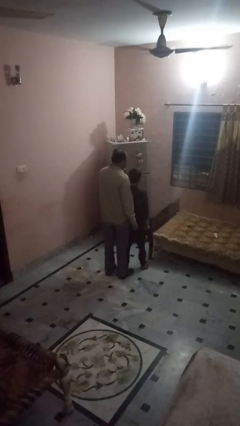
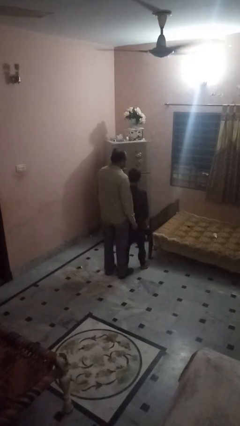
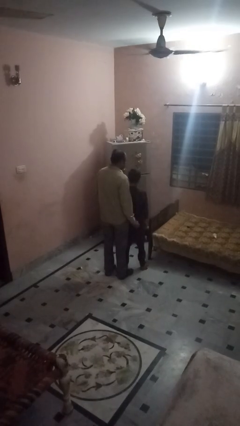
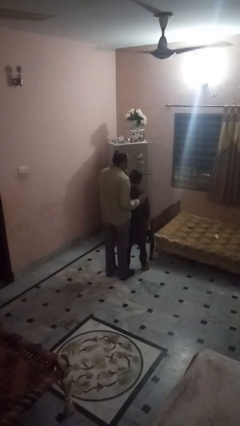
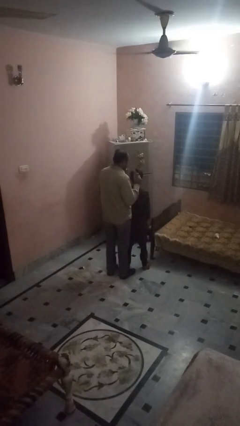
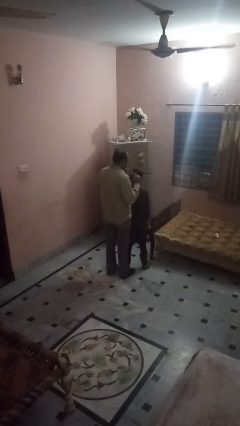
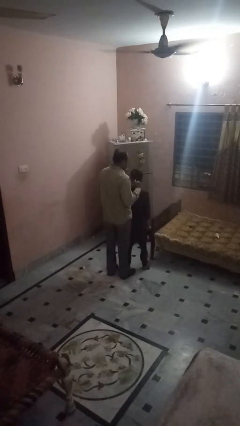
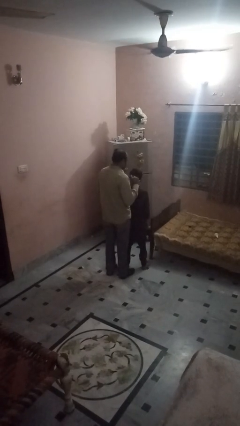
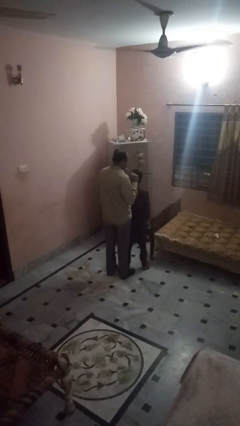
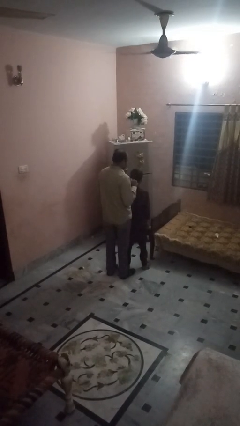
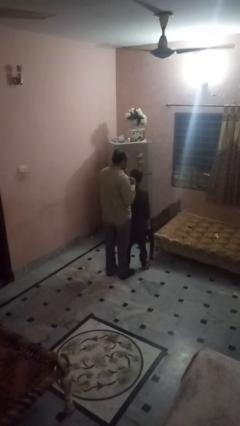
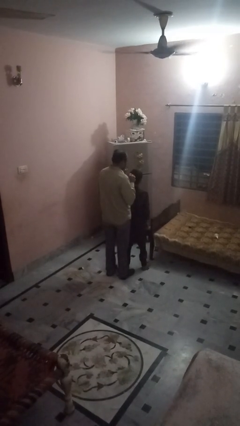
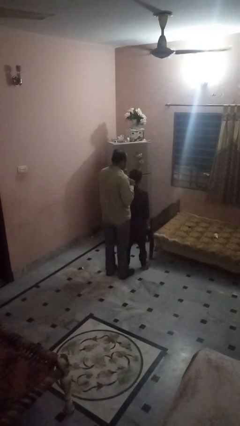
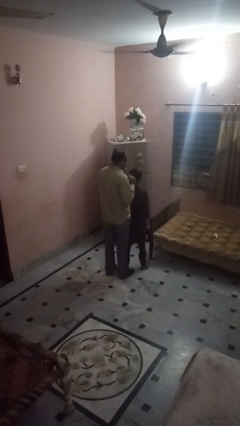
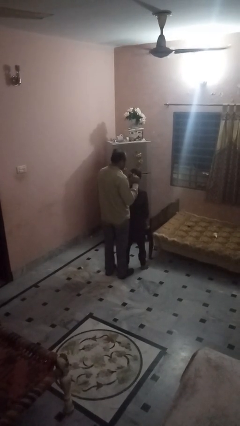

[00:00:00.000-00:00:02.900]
person brushes hair of person

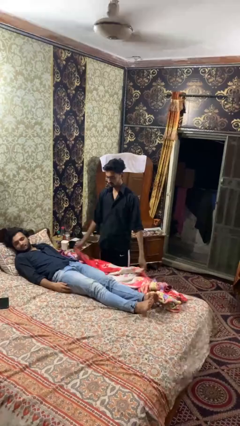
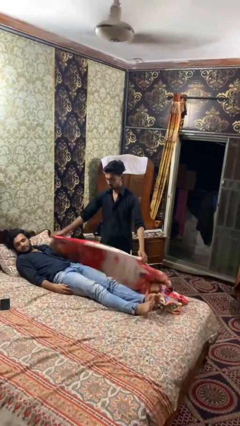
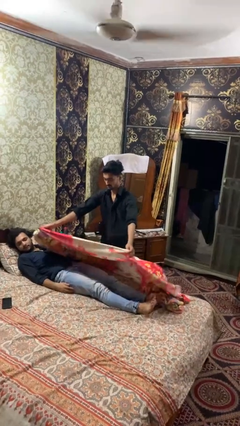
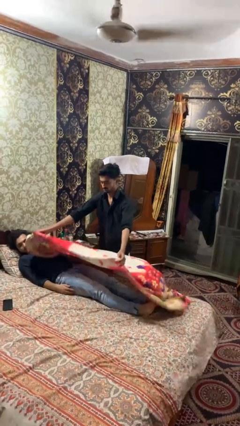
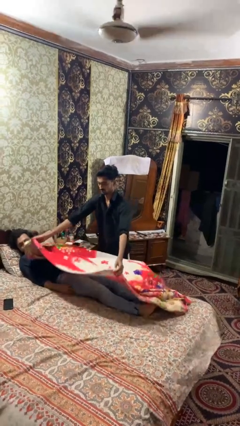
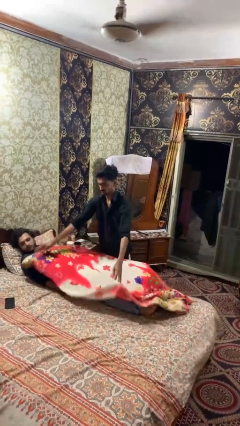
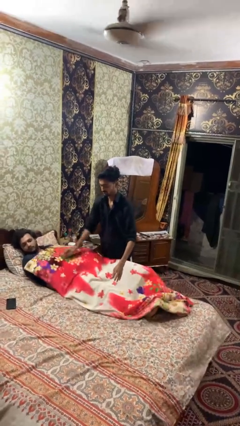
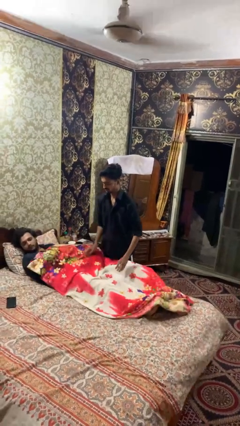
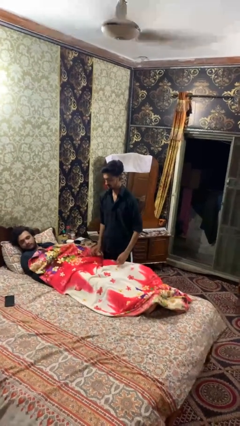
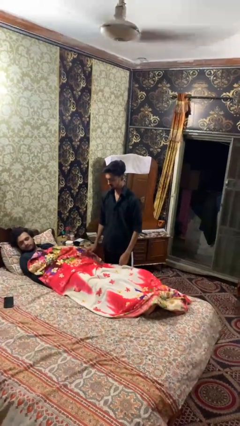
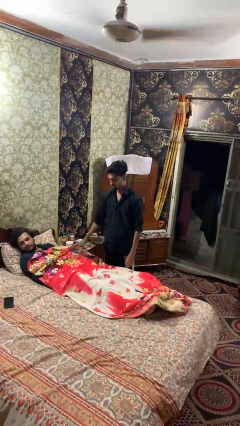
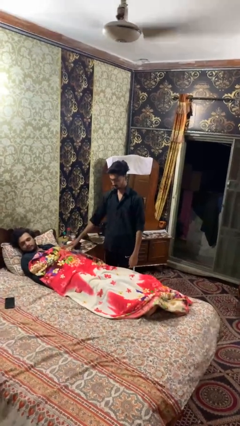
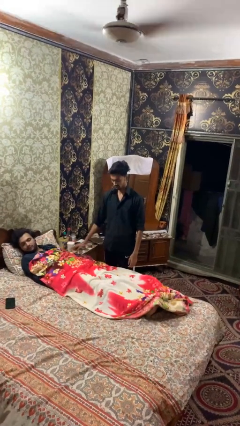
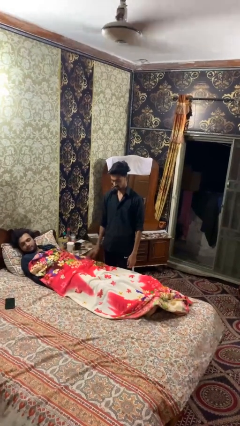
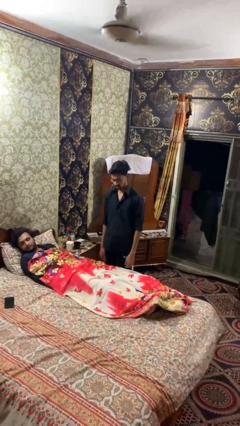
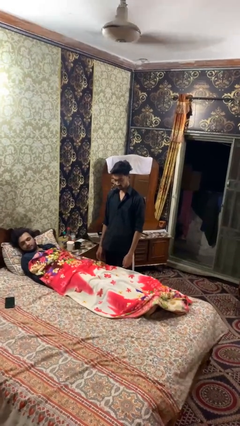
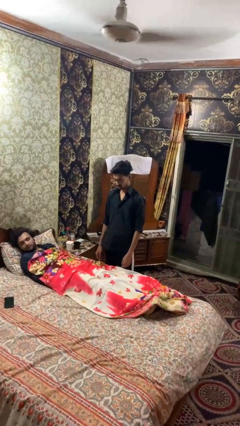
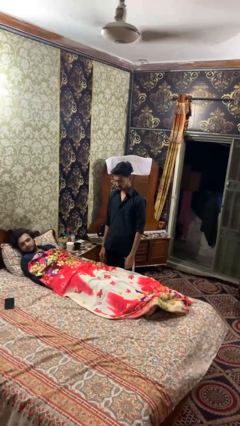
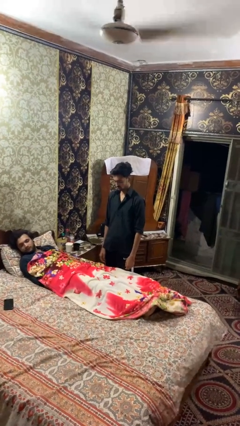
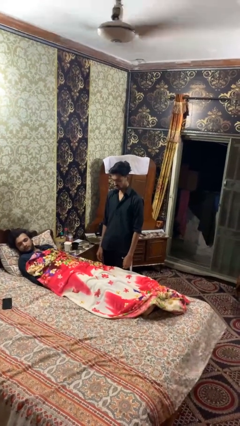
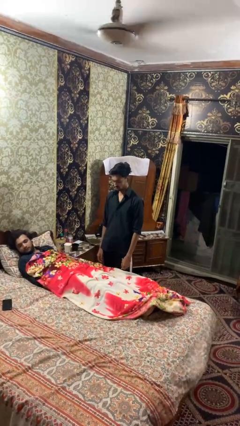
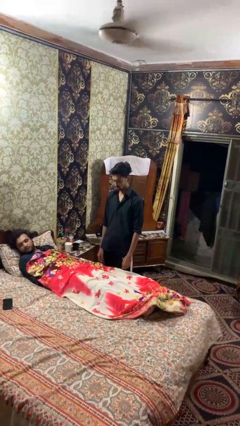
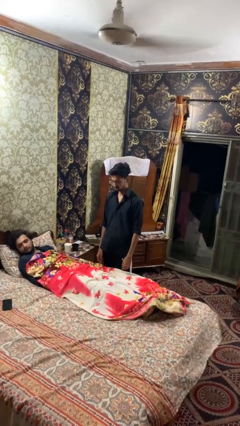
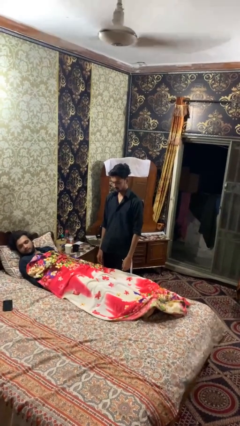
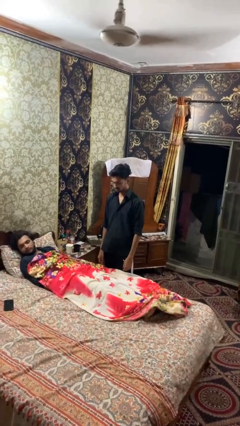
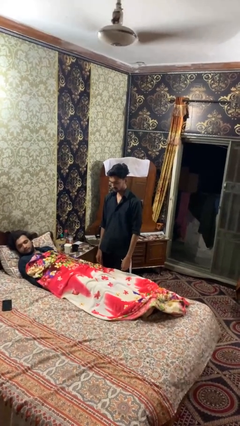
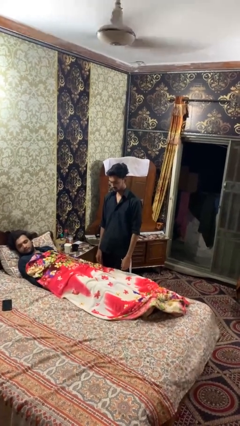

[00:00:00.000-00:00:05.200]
person covers friend with blanket

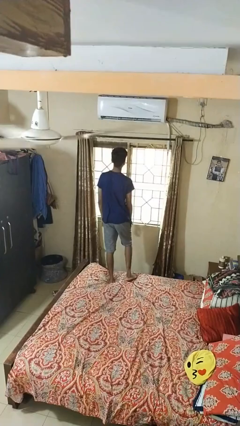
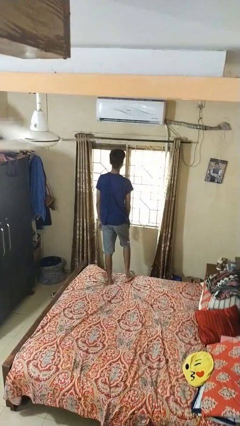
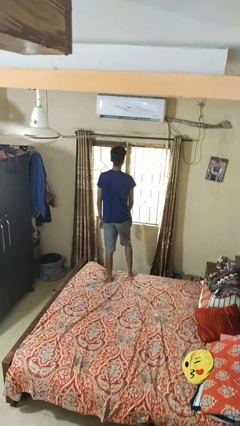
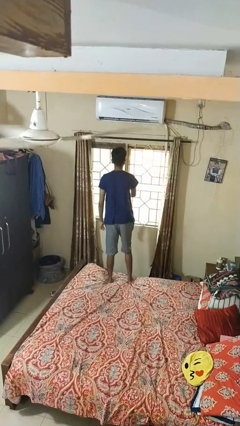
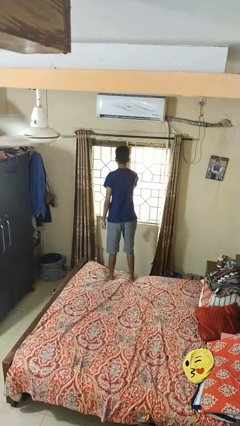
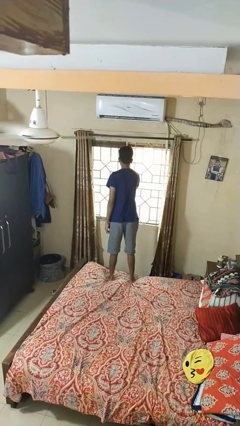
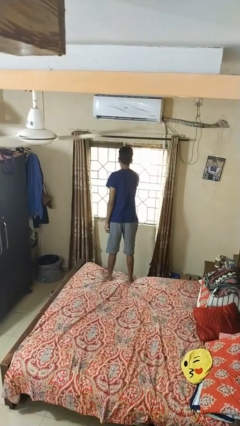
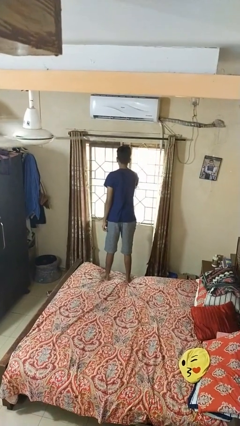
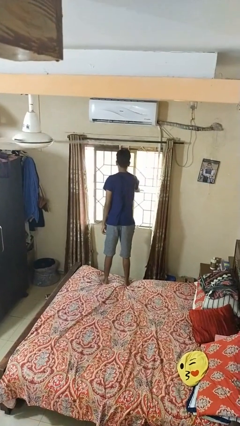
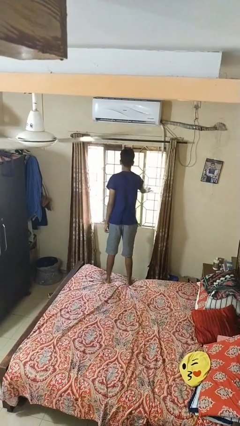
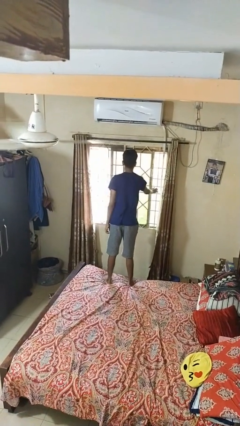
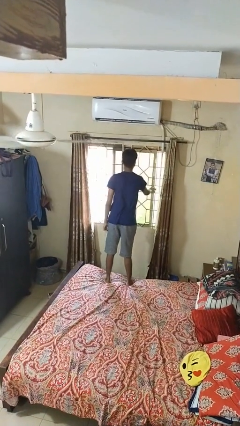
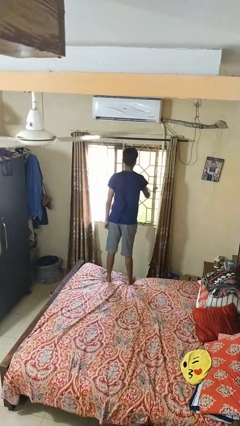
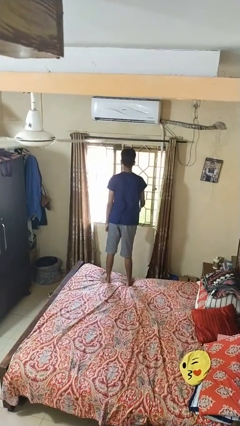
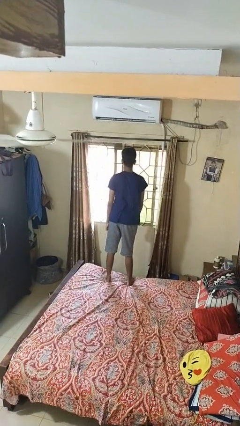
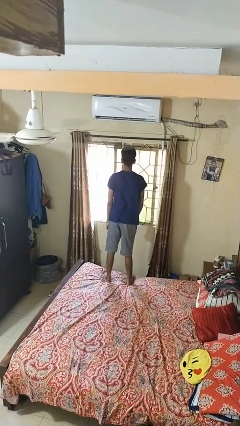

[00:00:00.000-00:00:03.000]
person opens home window

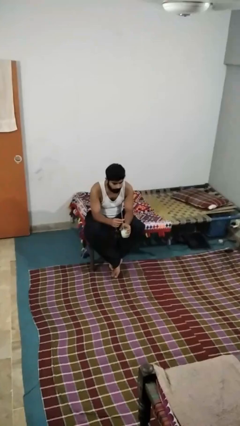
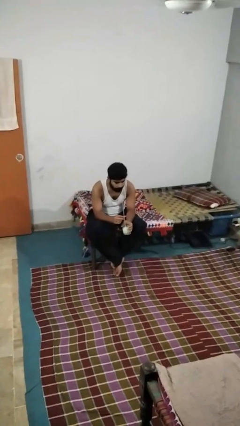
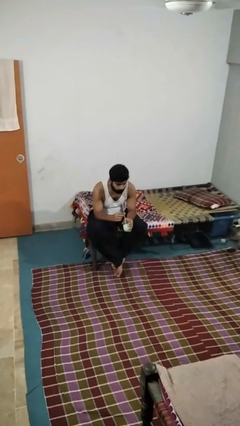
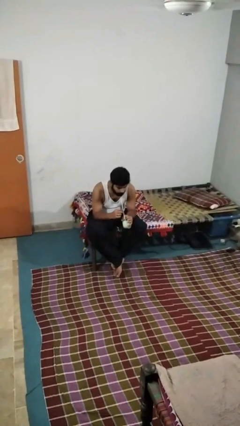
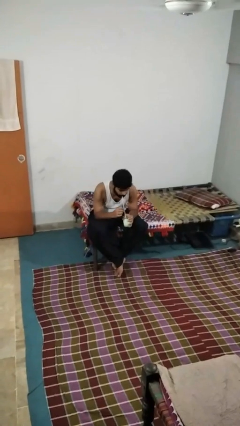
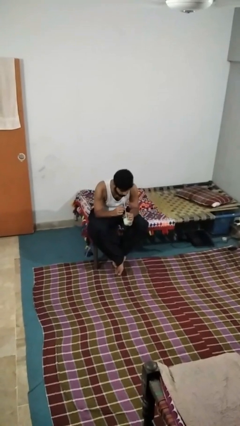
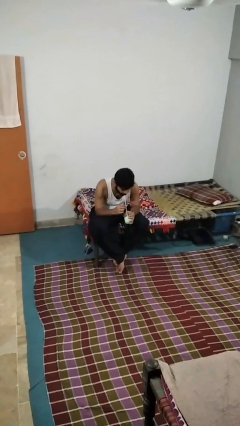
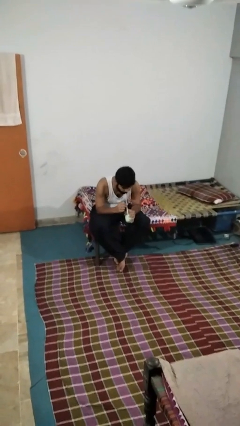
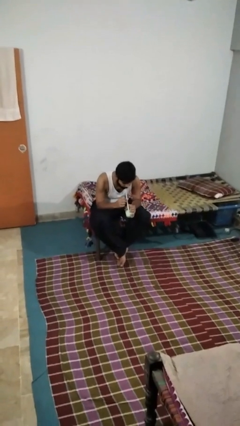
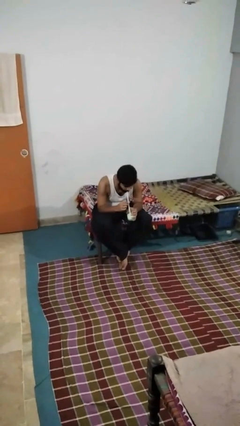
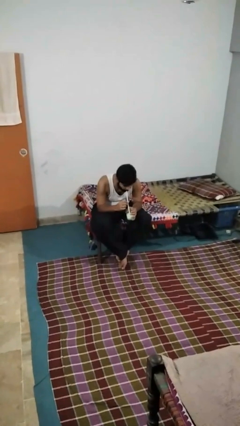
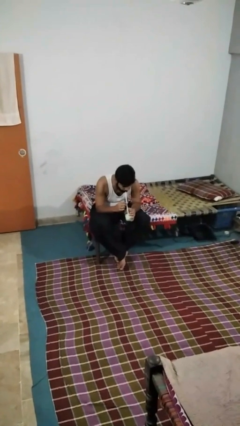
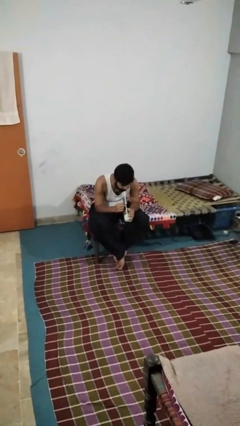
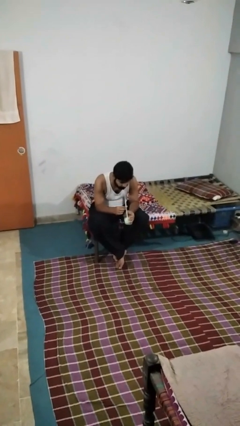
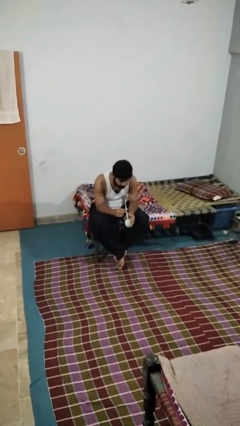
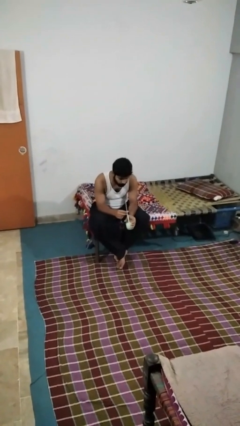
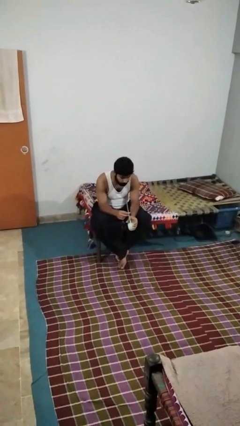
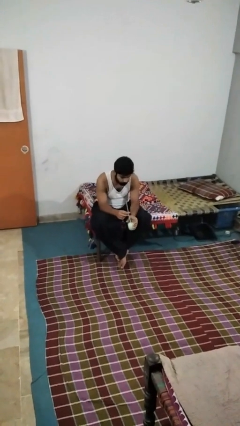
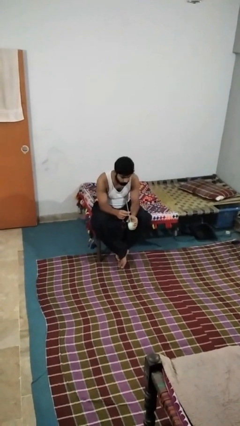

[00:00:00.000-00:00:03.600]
person drinks from straw

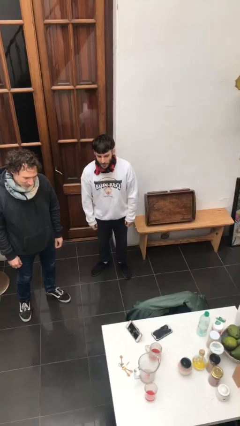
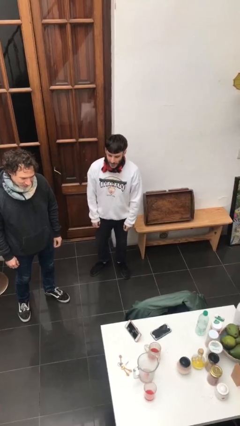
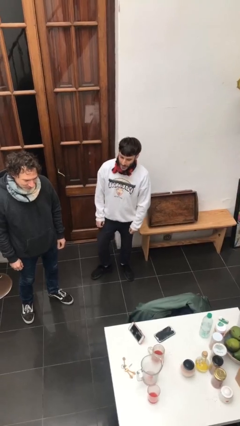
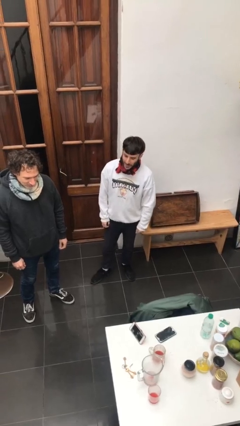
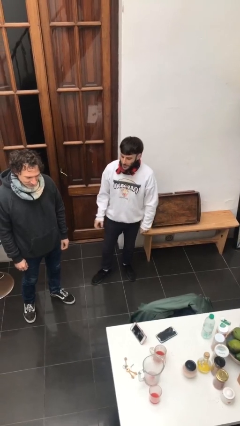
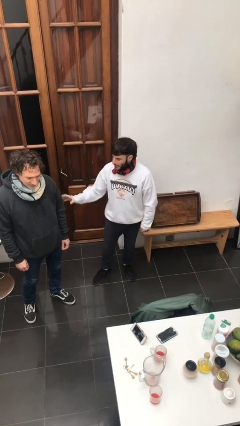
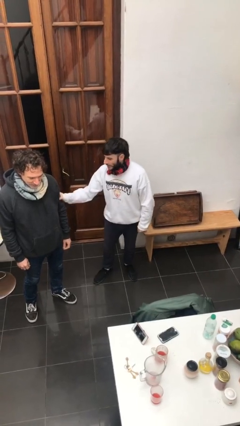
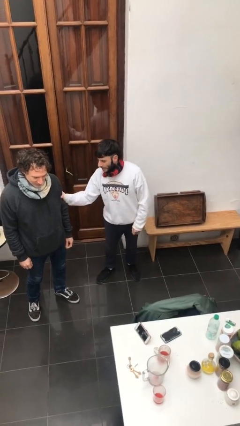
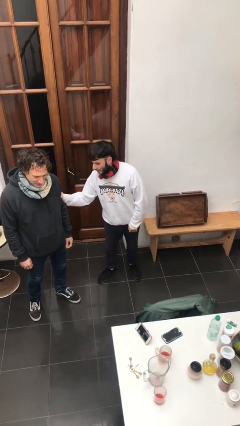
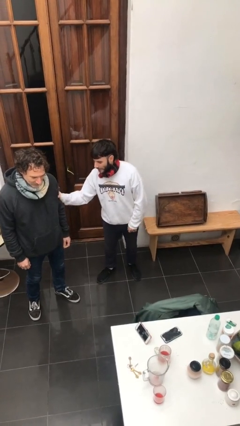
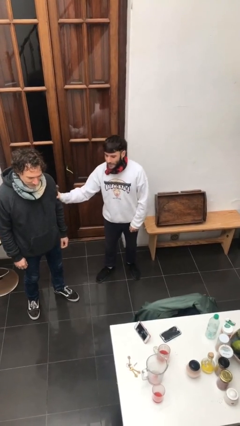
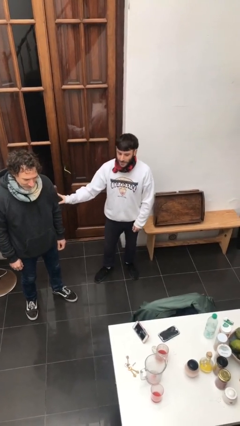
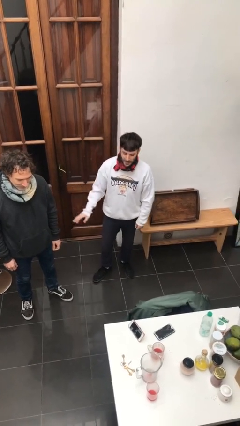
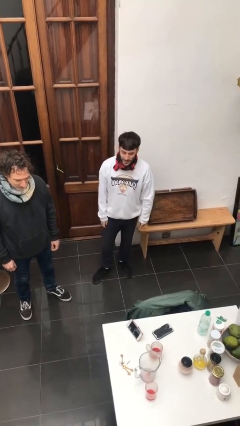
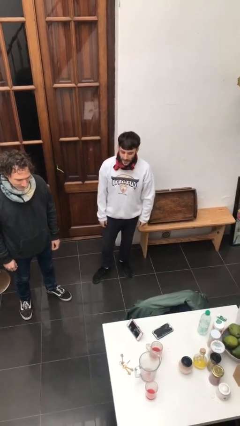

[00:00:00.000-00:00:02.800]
person grabs person by bicep

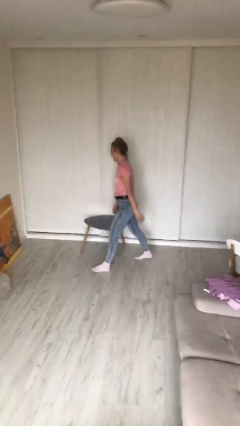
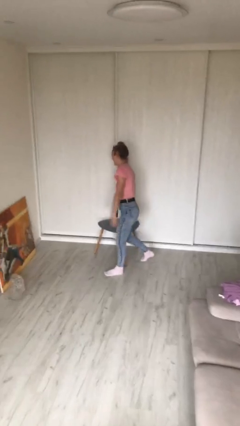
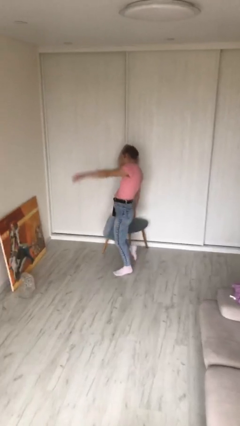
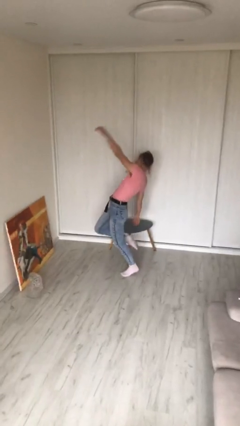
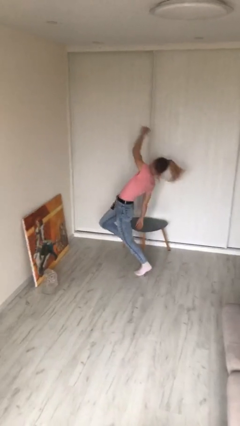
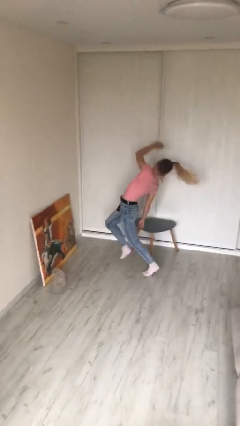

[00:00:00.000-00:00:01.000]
person bumps into table
